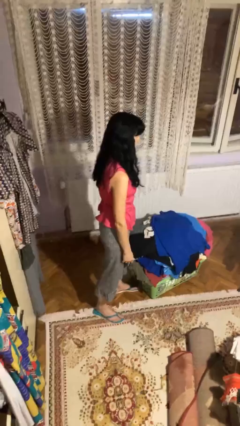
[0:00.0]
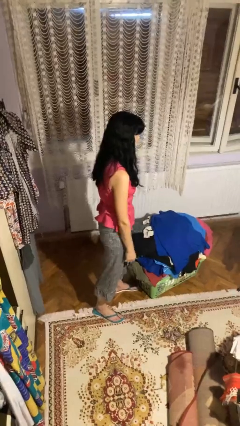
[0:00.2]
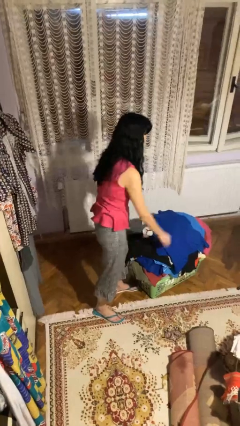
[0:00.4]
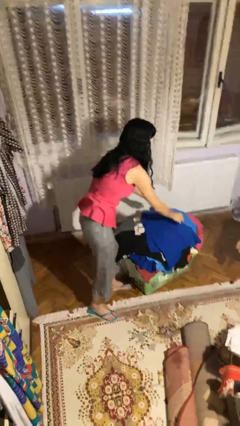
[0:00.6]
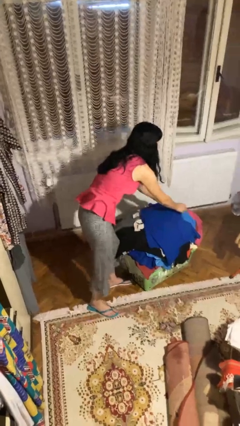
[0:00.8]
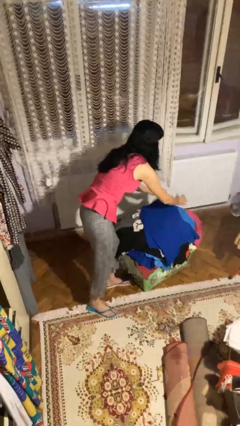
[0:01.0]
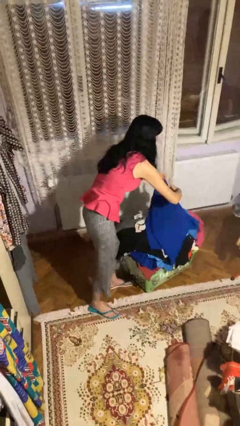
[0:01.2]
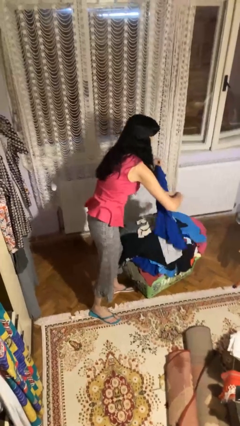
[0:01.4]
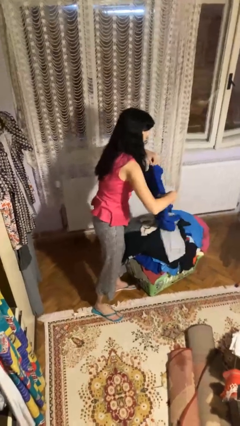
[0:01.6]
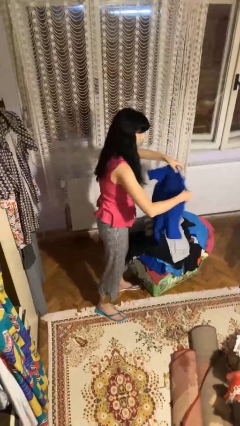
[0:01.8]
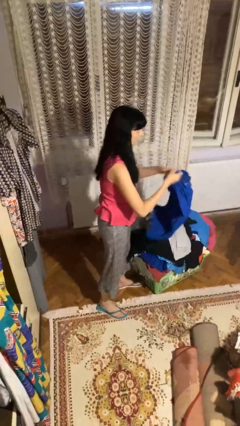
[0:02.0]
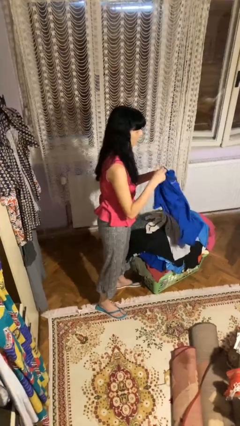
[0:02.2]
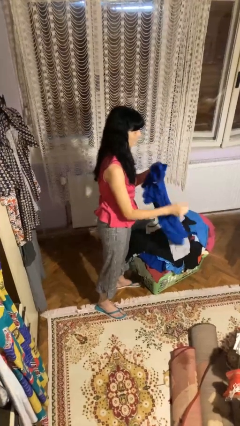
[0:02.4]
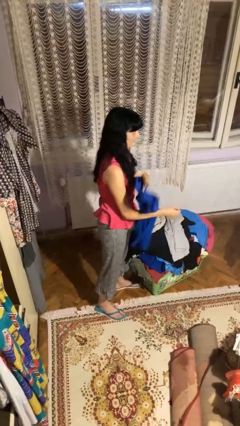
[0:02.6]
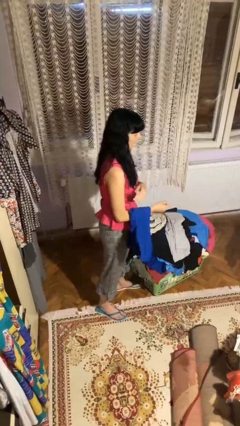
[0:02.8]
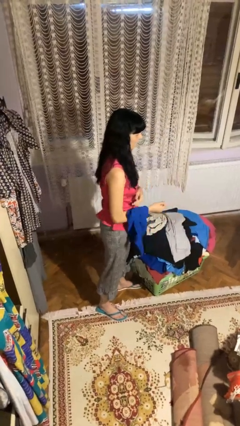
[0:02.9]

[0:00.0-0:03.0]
person folds shirt

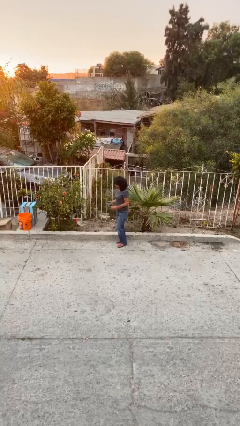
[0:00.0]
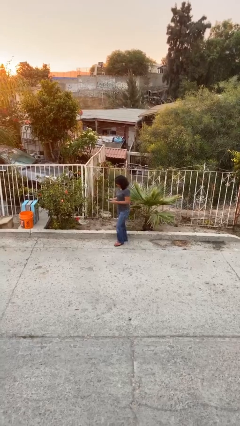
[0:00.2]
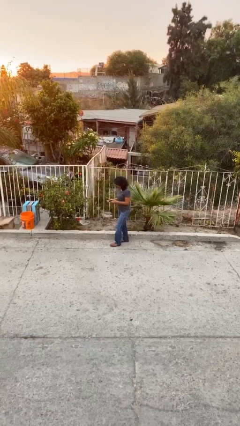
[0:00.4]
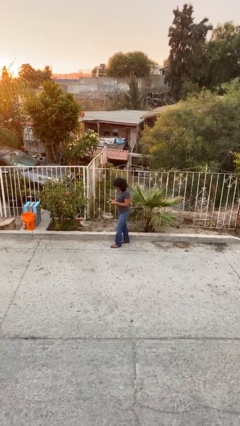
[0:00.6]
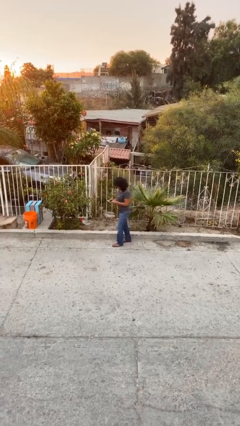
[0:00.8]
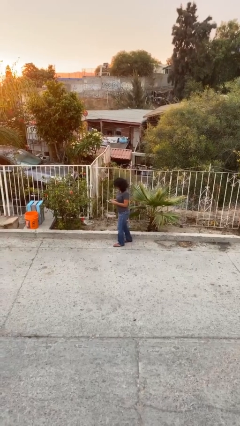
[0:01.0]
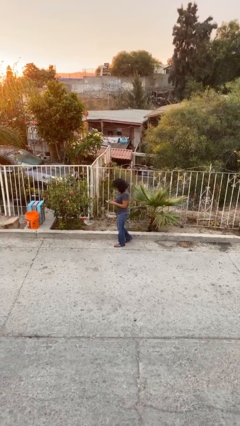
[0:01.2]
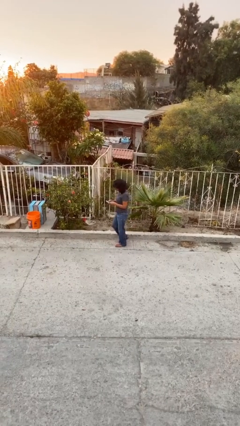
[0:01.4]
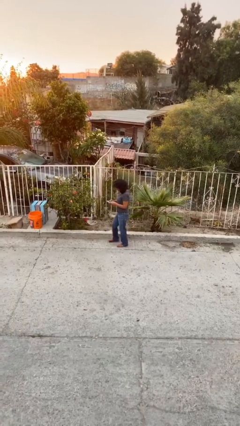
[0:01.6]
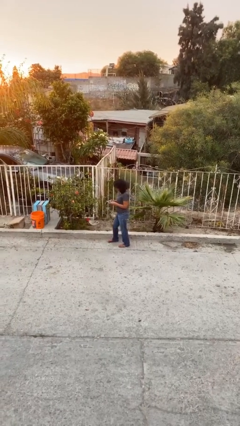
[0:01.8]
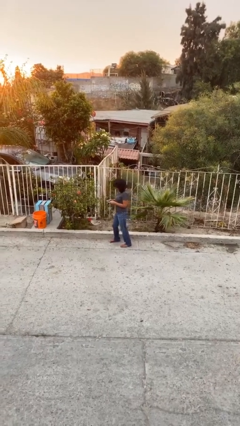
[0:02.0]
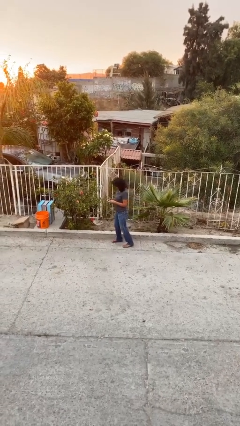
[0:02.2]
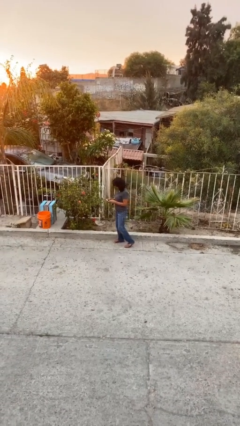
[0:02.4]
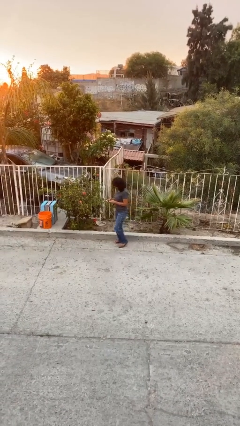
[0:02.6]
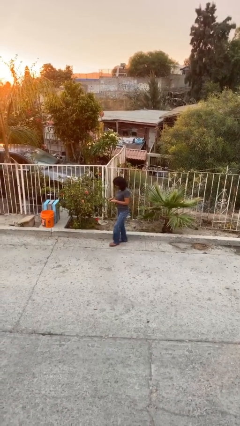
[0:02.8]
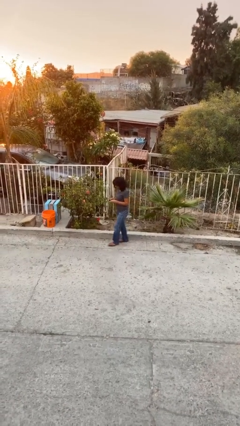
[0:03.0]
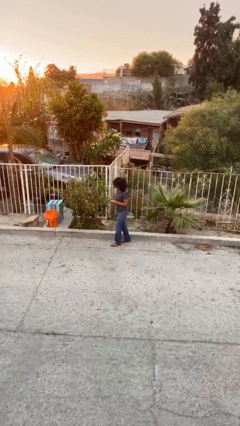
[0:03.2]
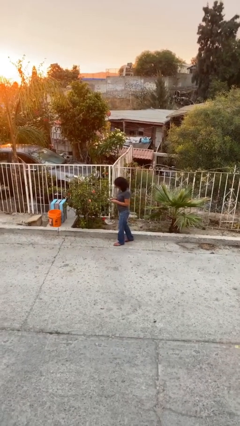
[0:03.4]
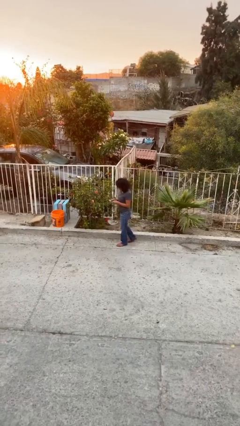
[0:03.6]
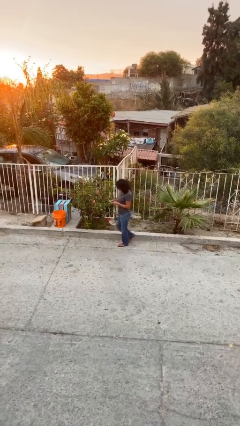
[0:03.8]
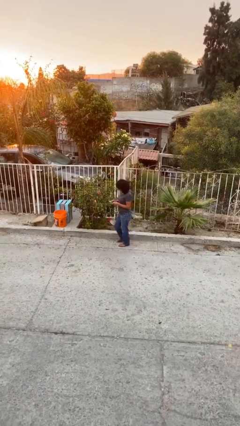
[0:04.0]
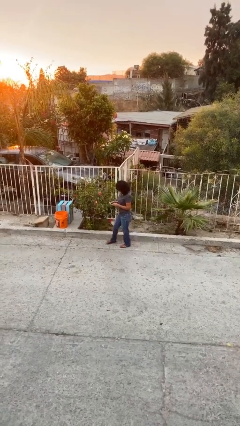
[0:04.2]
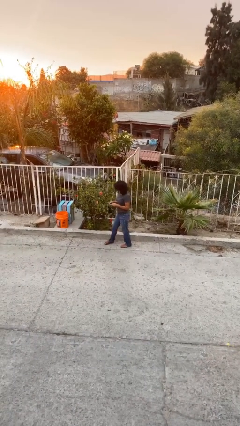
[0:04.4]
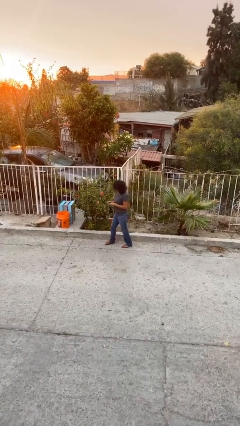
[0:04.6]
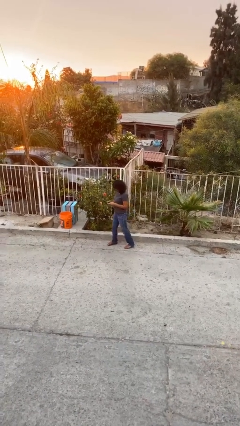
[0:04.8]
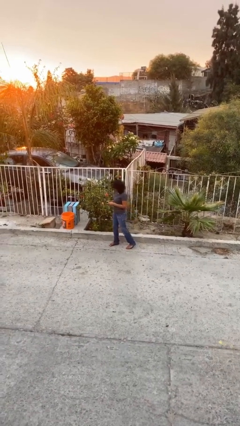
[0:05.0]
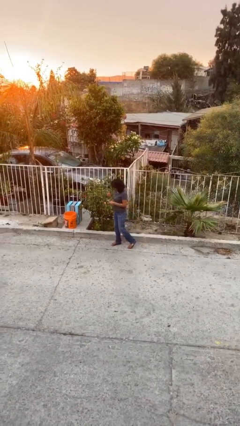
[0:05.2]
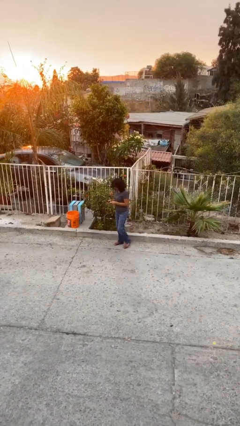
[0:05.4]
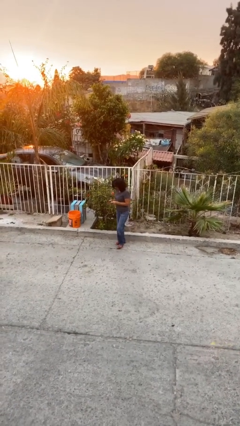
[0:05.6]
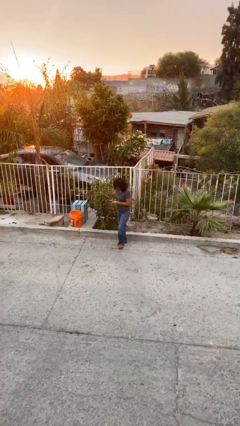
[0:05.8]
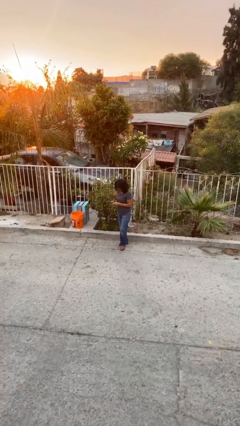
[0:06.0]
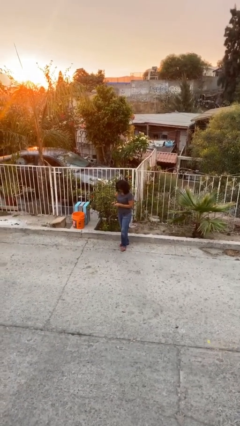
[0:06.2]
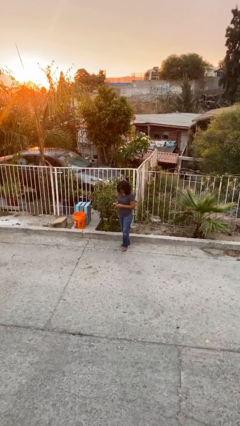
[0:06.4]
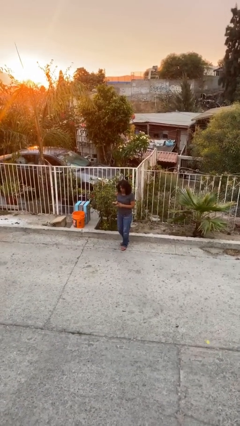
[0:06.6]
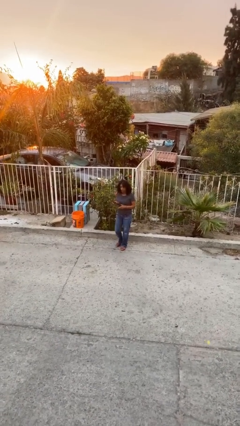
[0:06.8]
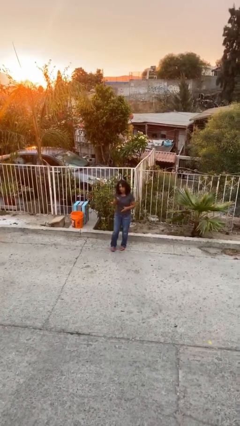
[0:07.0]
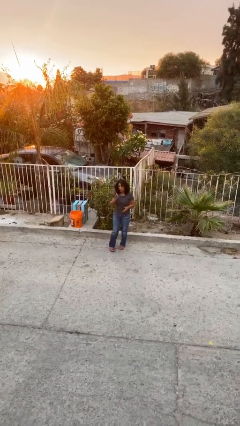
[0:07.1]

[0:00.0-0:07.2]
person texts on phone

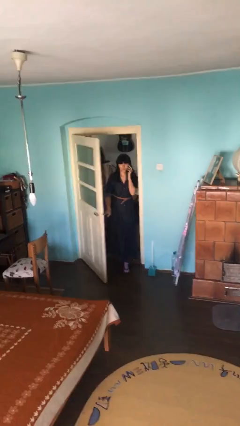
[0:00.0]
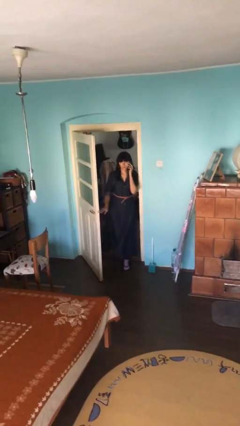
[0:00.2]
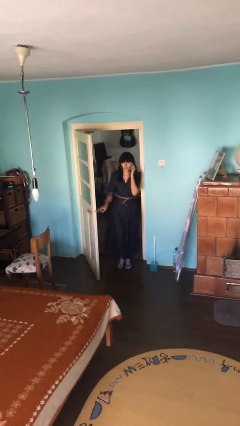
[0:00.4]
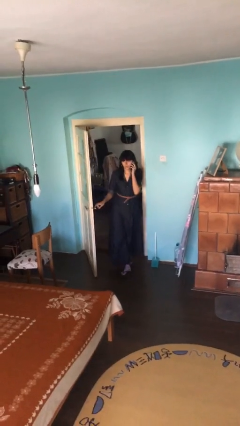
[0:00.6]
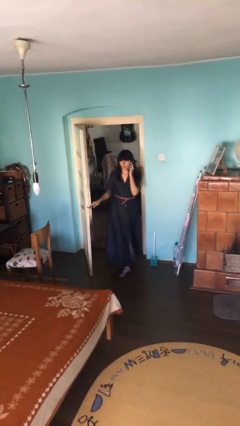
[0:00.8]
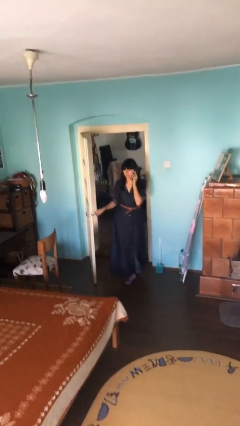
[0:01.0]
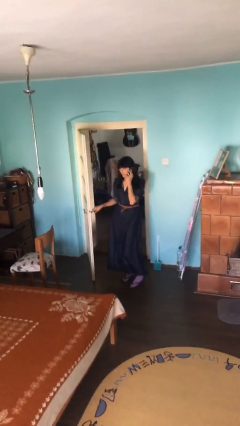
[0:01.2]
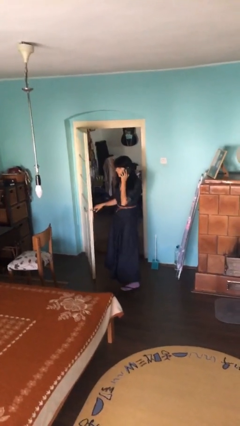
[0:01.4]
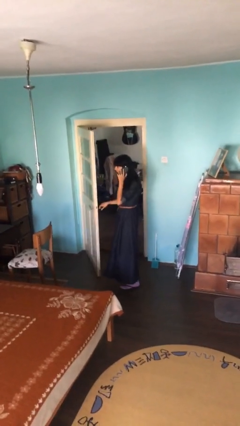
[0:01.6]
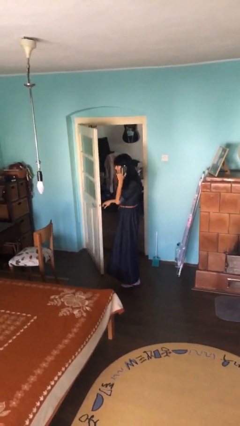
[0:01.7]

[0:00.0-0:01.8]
person enters scene through structure

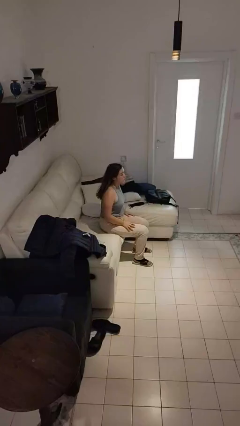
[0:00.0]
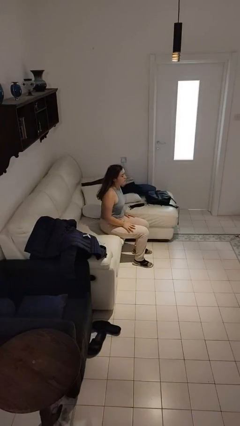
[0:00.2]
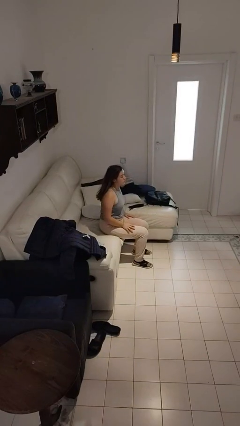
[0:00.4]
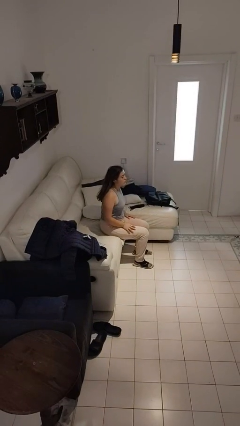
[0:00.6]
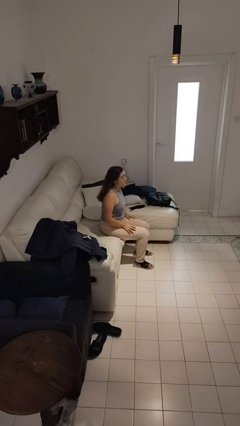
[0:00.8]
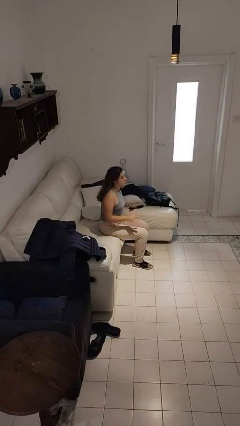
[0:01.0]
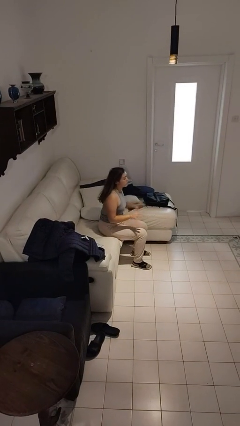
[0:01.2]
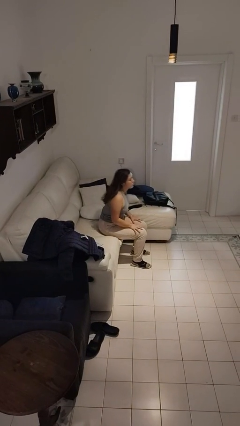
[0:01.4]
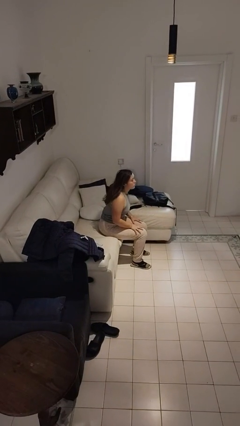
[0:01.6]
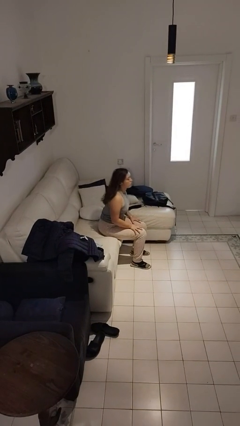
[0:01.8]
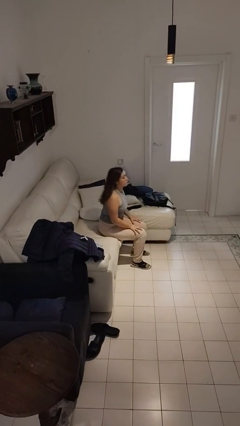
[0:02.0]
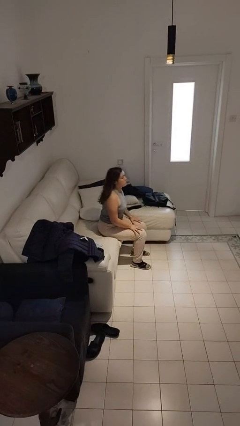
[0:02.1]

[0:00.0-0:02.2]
person slaps hands on thighs

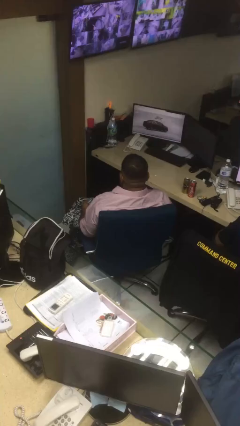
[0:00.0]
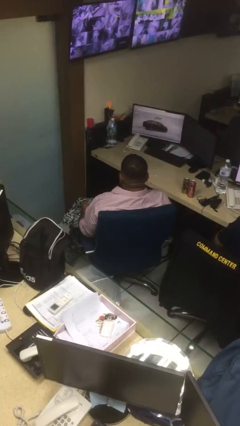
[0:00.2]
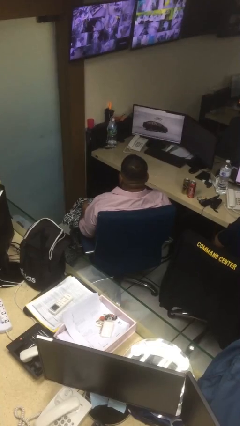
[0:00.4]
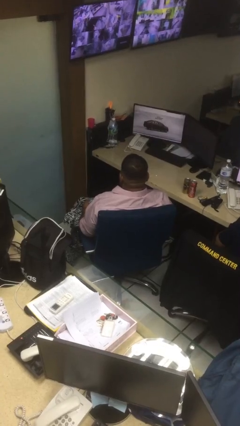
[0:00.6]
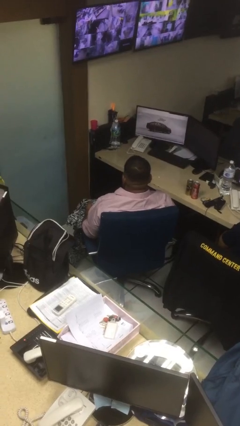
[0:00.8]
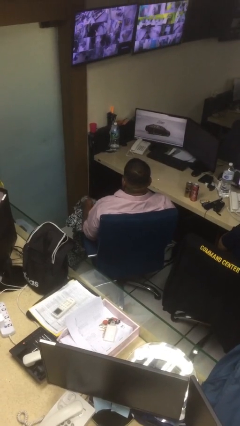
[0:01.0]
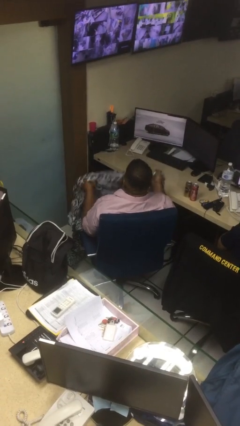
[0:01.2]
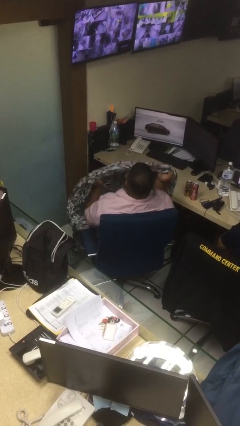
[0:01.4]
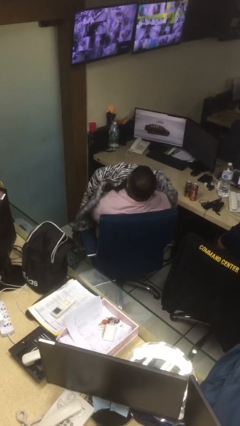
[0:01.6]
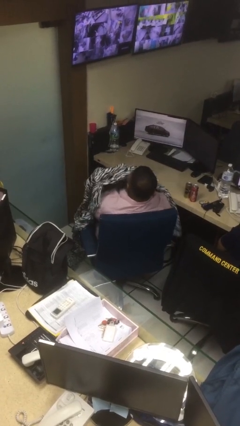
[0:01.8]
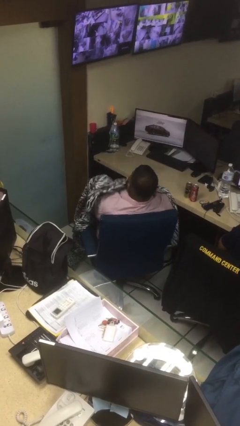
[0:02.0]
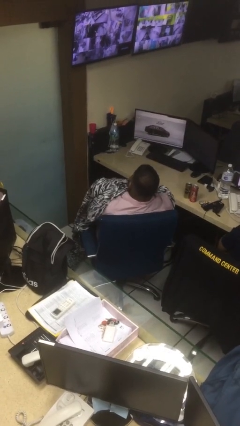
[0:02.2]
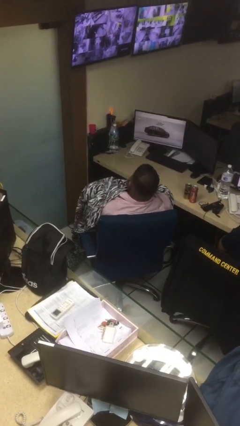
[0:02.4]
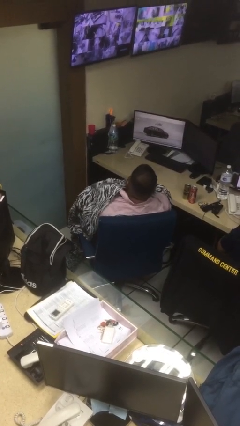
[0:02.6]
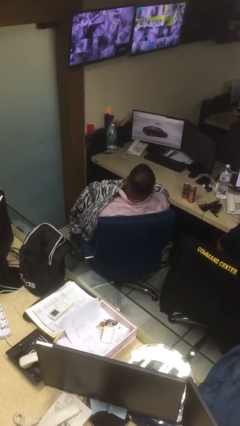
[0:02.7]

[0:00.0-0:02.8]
person covers with blanket
